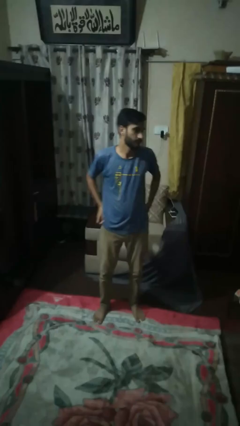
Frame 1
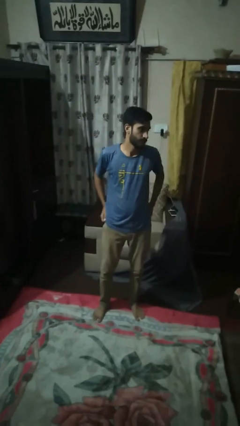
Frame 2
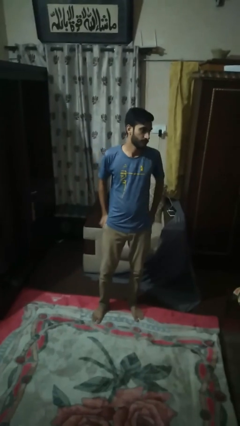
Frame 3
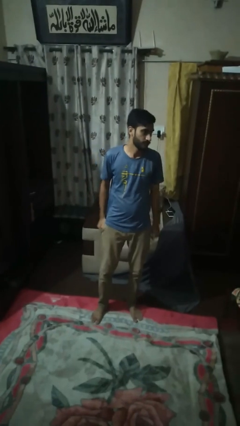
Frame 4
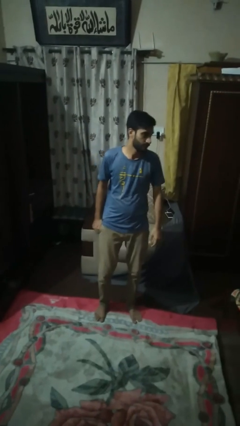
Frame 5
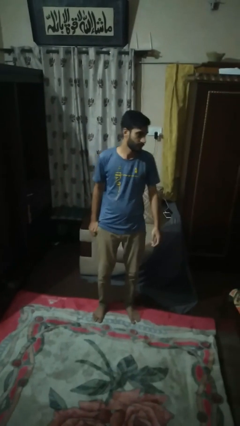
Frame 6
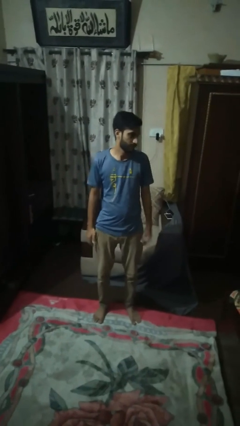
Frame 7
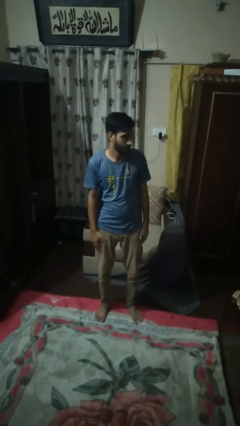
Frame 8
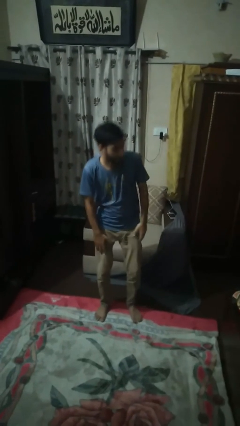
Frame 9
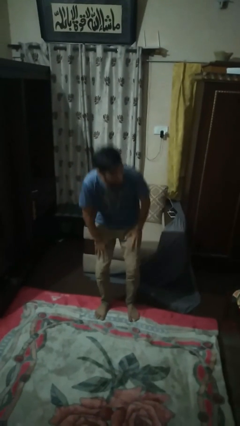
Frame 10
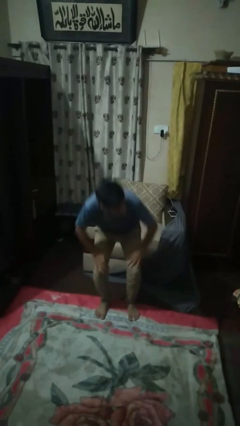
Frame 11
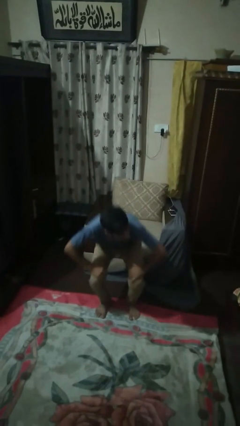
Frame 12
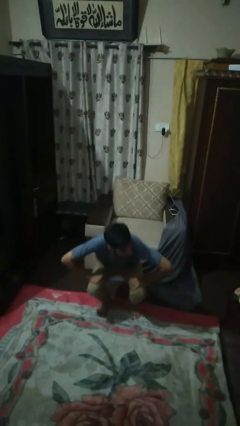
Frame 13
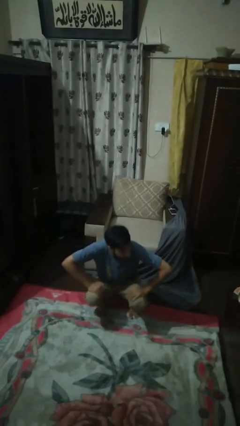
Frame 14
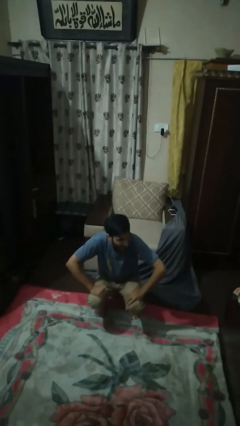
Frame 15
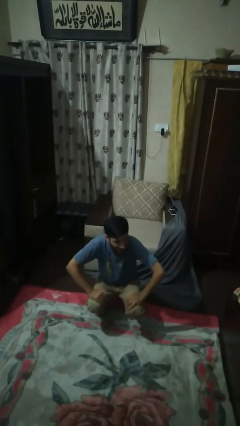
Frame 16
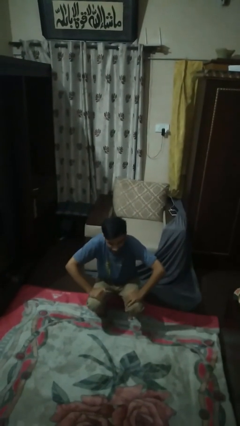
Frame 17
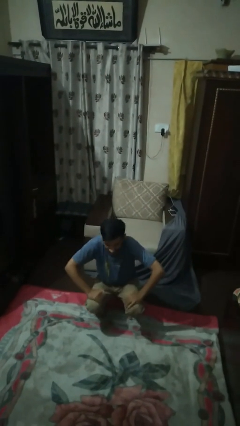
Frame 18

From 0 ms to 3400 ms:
person squats

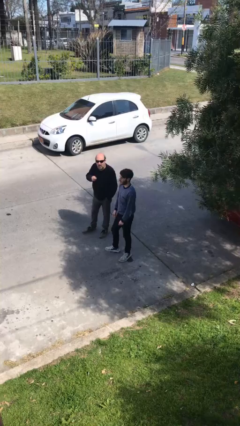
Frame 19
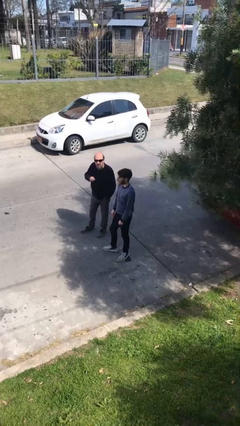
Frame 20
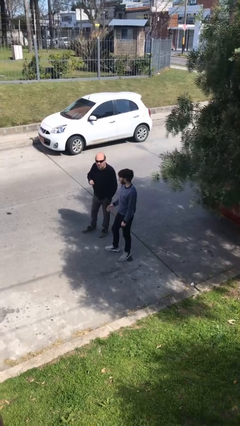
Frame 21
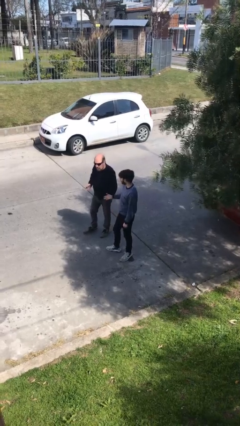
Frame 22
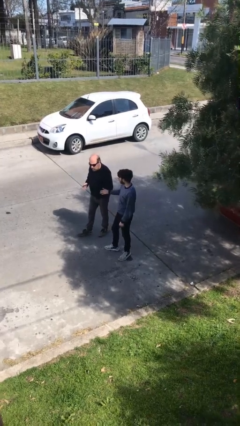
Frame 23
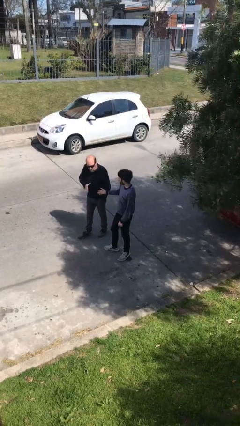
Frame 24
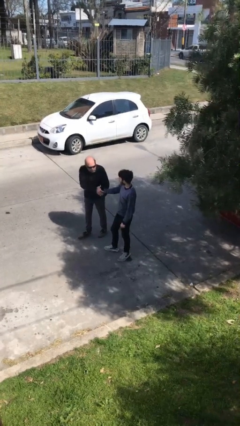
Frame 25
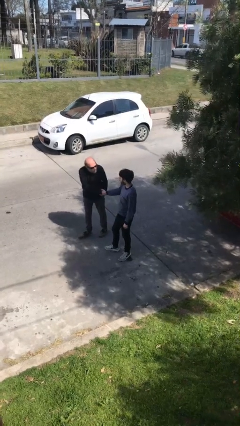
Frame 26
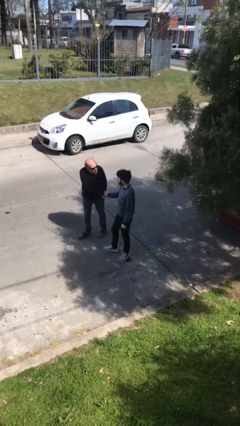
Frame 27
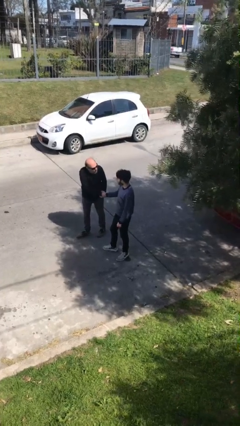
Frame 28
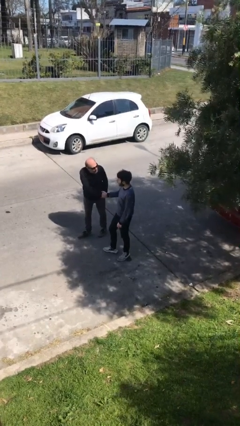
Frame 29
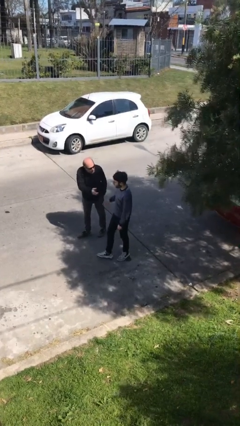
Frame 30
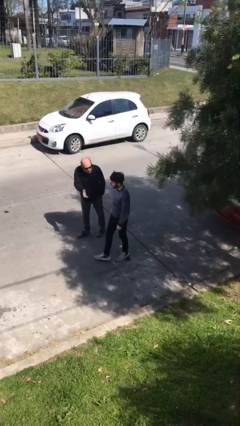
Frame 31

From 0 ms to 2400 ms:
person shakes hand

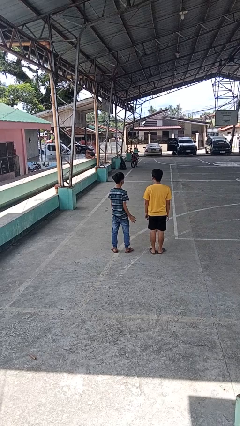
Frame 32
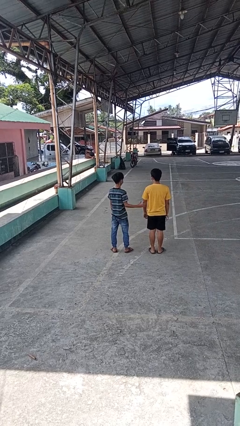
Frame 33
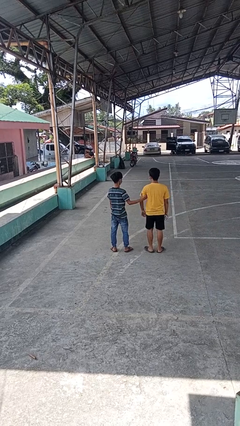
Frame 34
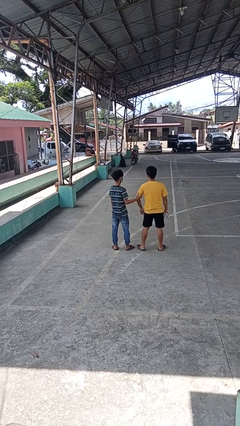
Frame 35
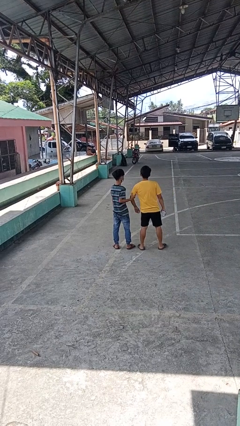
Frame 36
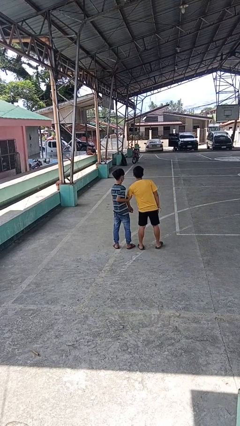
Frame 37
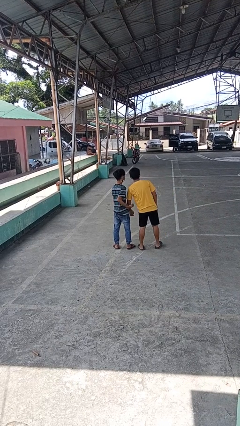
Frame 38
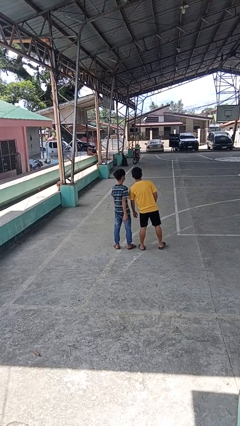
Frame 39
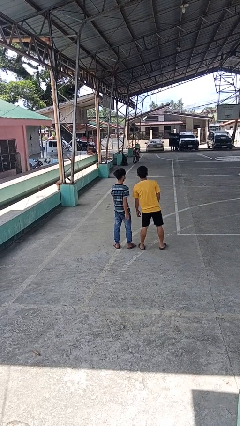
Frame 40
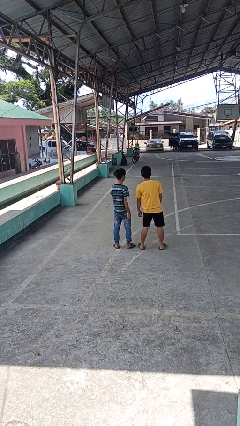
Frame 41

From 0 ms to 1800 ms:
person grabs person by bicep

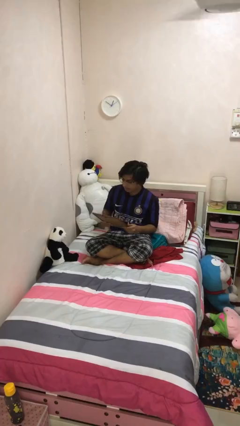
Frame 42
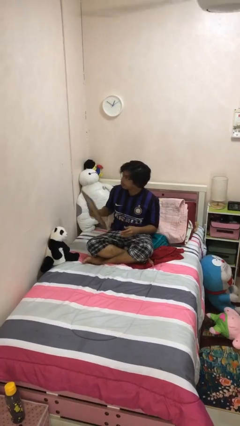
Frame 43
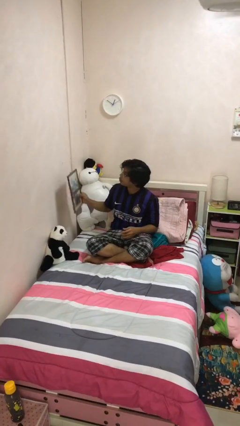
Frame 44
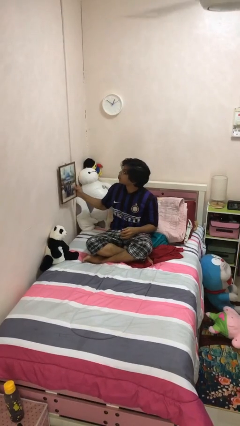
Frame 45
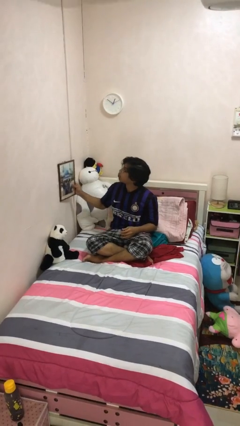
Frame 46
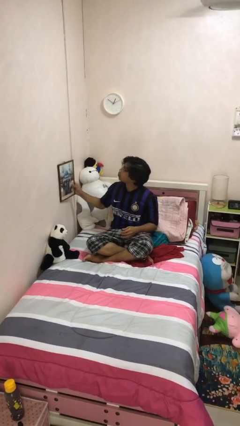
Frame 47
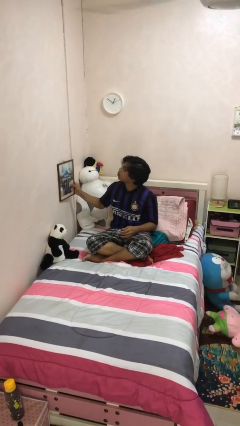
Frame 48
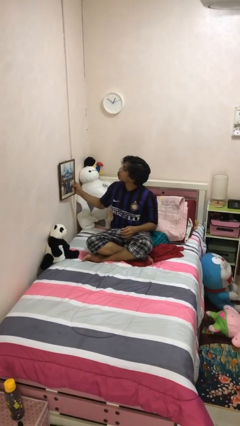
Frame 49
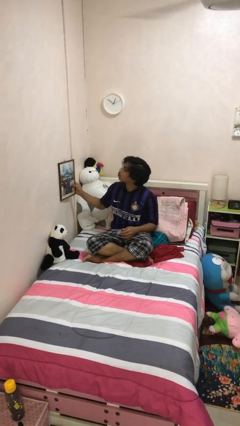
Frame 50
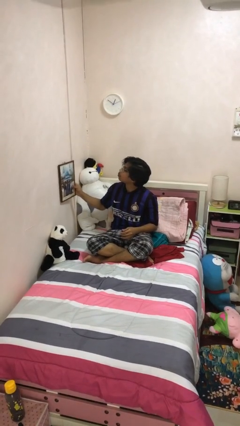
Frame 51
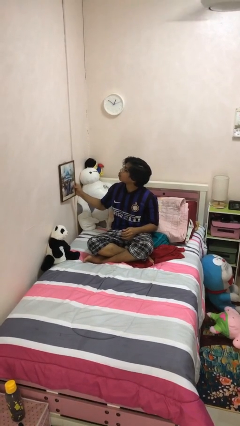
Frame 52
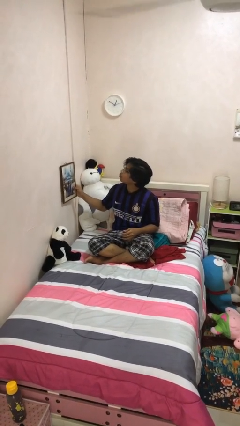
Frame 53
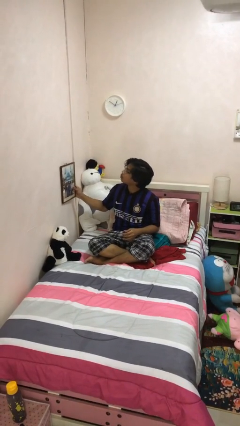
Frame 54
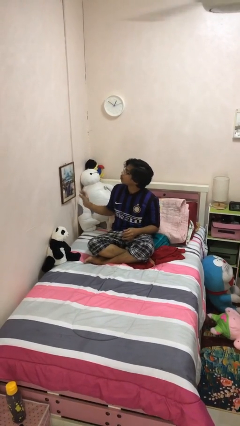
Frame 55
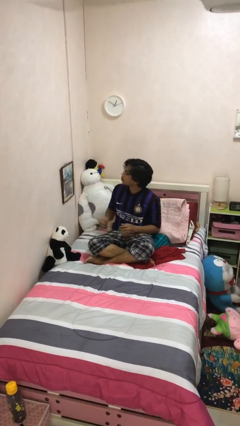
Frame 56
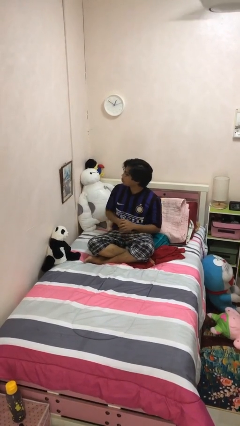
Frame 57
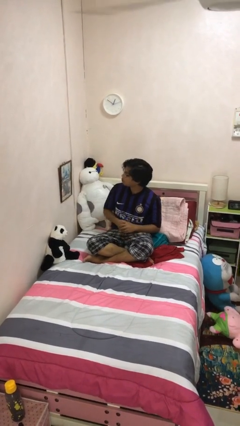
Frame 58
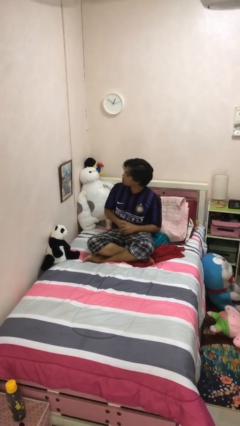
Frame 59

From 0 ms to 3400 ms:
person puts up picture frame

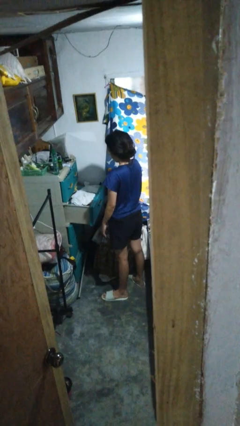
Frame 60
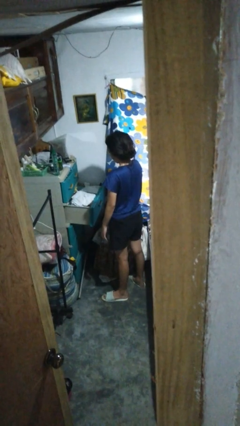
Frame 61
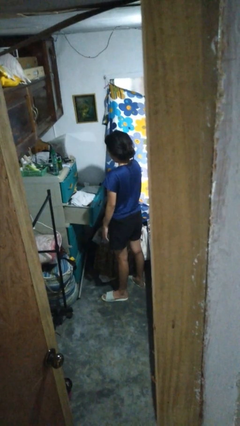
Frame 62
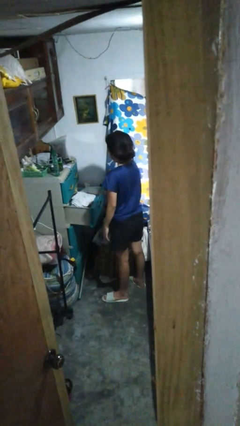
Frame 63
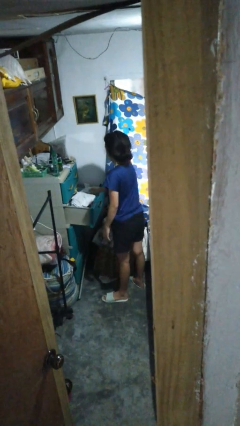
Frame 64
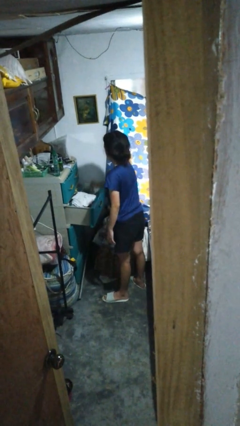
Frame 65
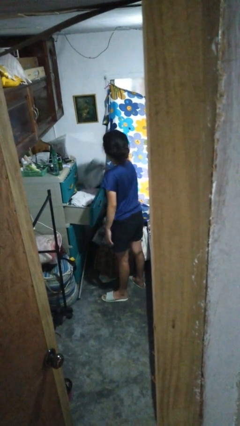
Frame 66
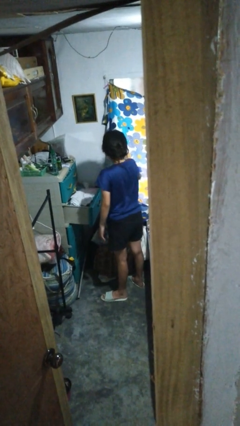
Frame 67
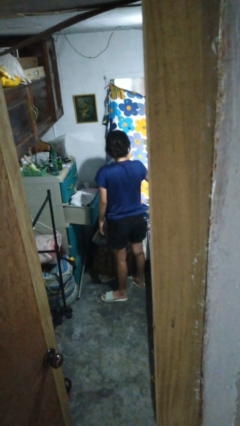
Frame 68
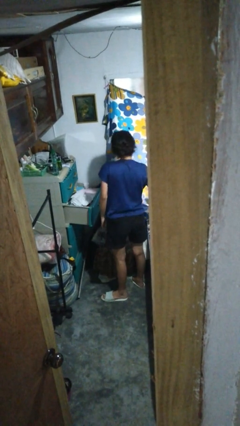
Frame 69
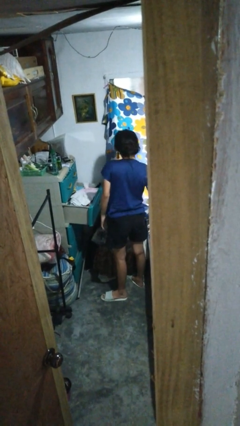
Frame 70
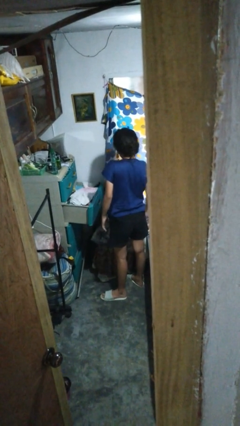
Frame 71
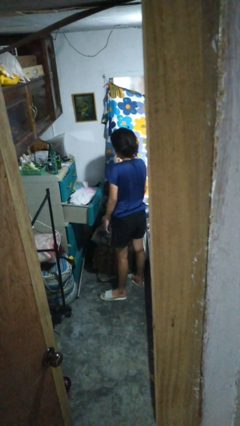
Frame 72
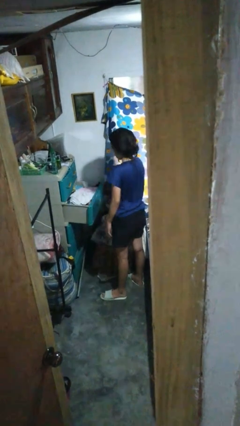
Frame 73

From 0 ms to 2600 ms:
person takes clothes from dresser

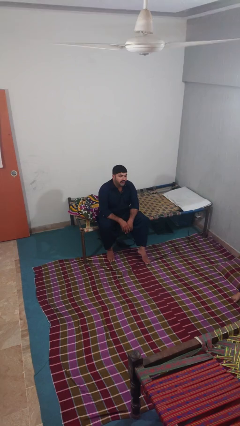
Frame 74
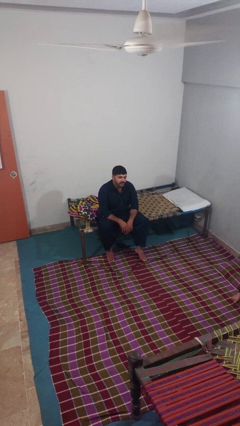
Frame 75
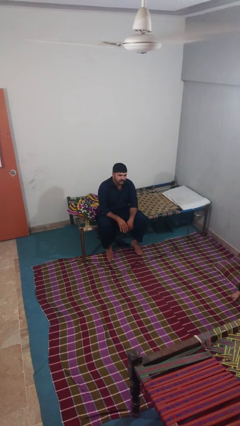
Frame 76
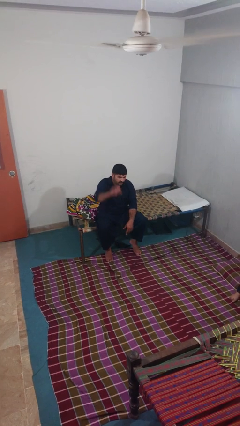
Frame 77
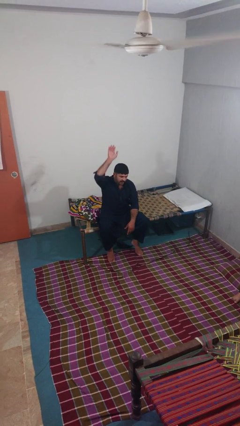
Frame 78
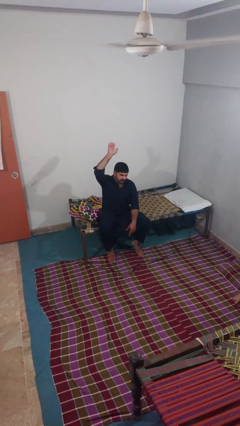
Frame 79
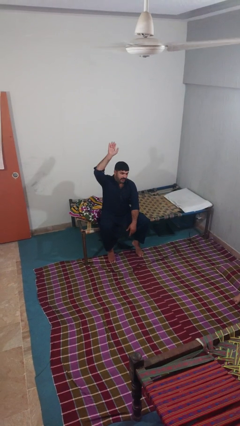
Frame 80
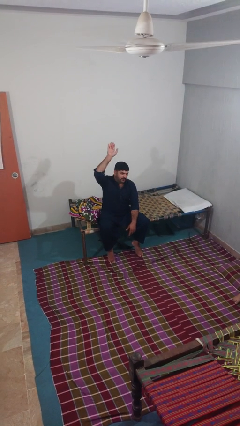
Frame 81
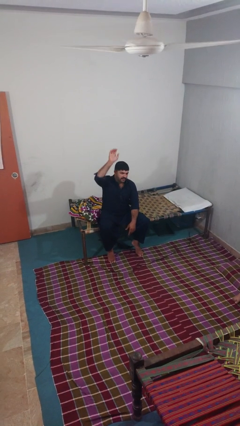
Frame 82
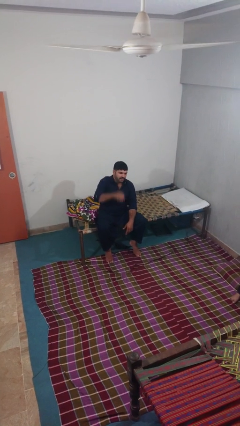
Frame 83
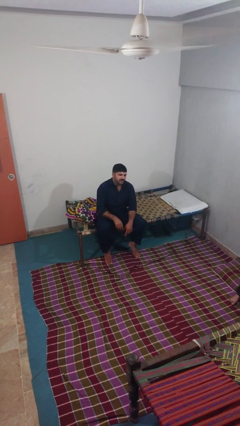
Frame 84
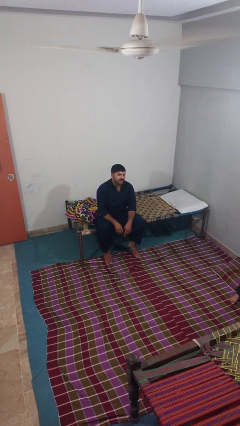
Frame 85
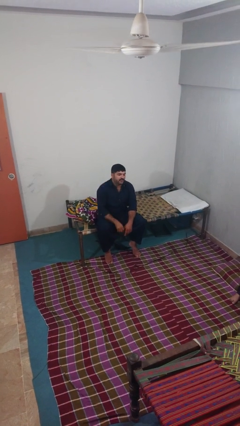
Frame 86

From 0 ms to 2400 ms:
person gestures raise hand

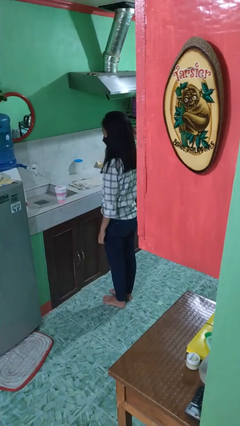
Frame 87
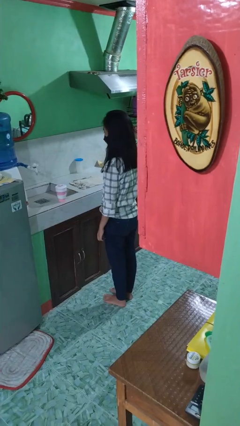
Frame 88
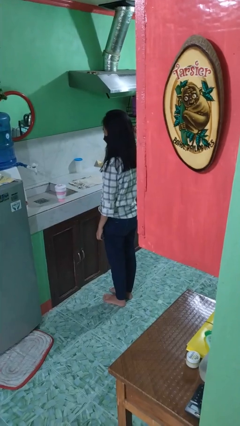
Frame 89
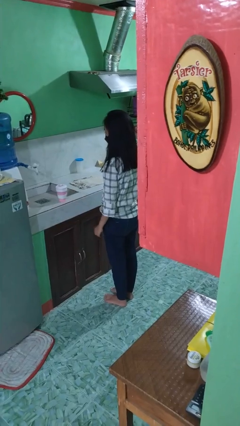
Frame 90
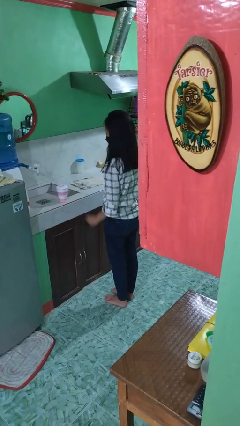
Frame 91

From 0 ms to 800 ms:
person picks up object from countertop

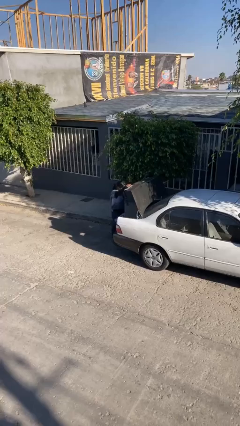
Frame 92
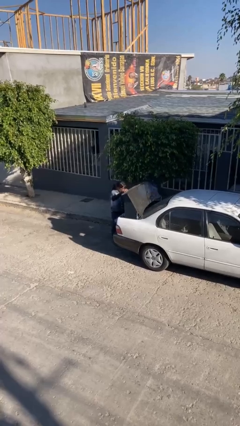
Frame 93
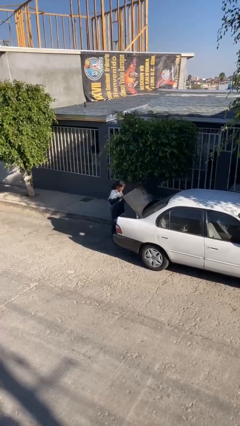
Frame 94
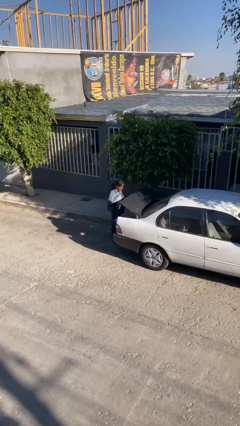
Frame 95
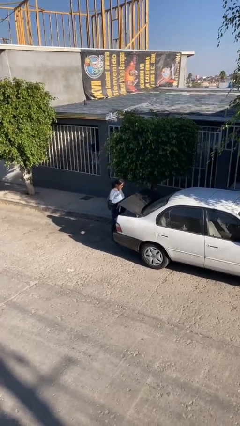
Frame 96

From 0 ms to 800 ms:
person closes car trunk
